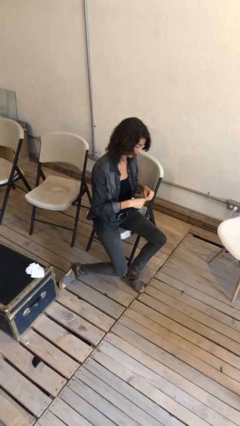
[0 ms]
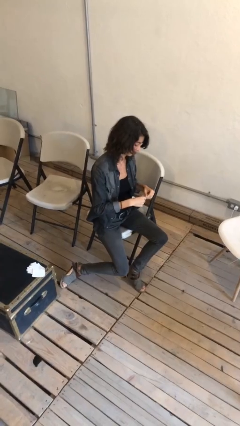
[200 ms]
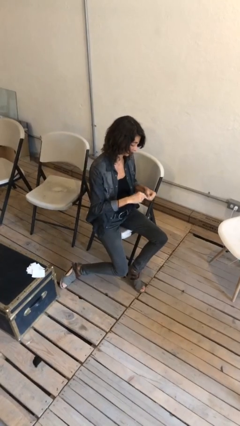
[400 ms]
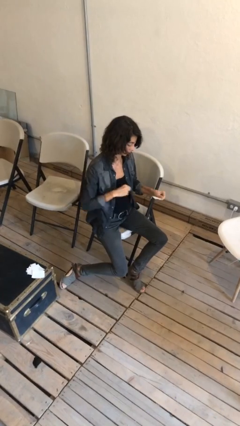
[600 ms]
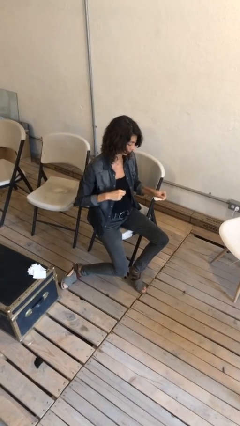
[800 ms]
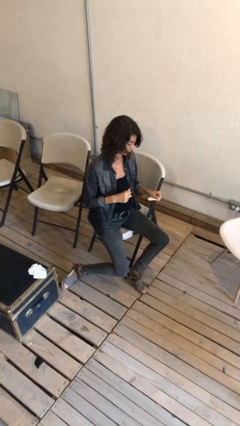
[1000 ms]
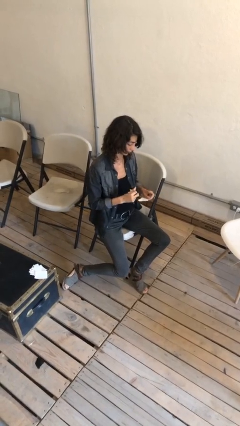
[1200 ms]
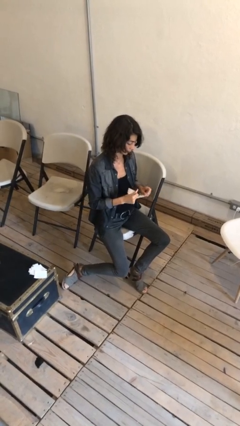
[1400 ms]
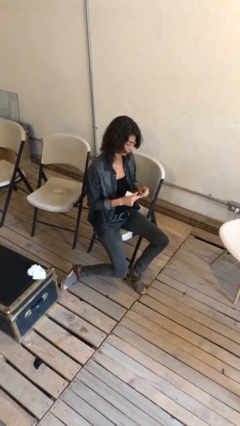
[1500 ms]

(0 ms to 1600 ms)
person tears paper

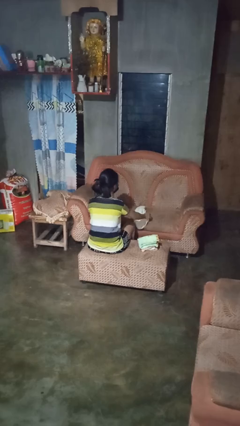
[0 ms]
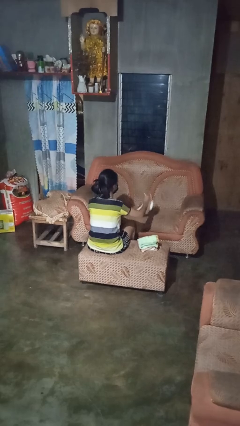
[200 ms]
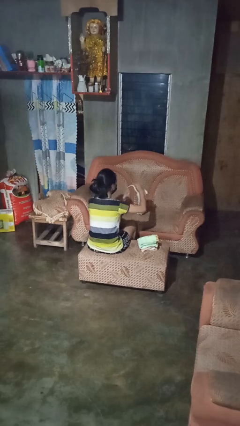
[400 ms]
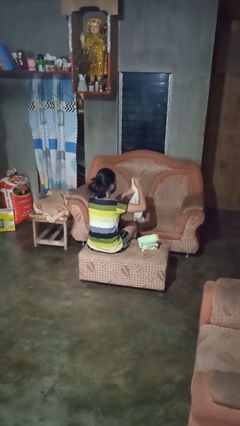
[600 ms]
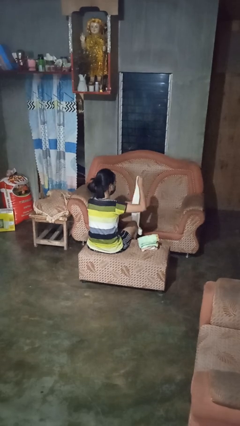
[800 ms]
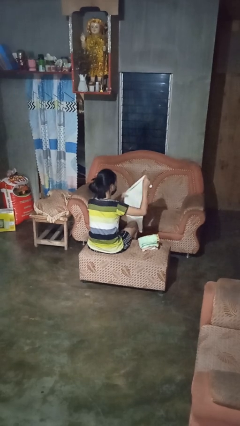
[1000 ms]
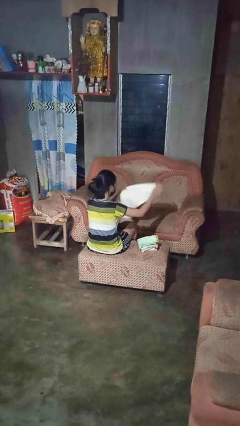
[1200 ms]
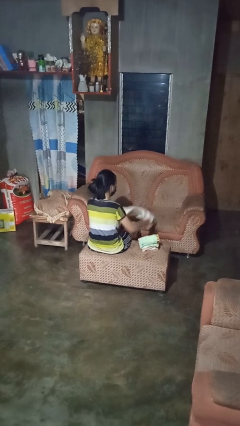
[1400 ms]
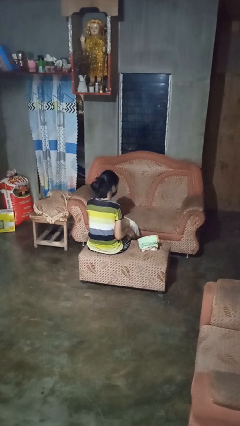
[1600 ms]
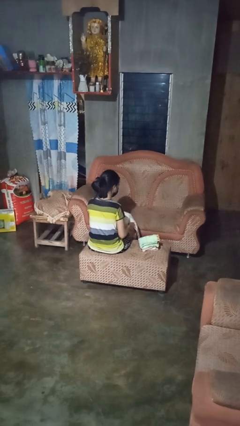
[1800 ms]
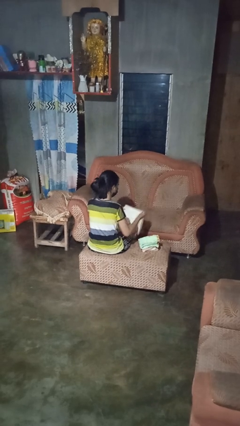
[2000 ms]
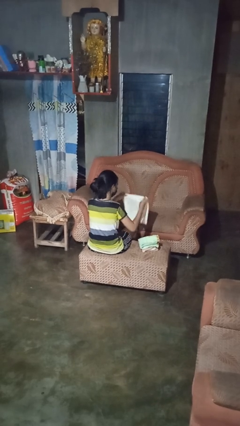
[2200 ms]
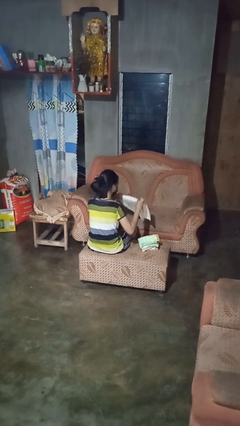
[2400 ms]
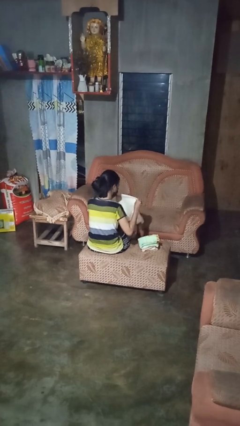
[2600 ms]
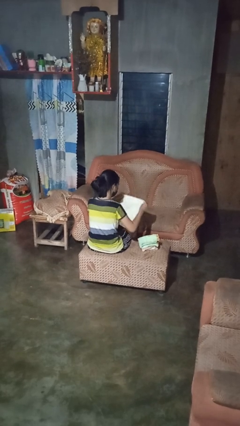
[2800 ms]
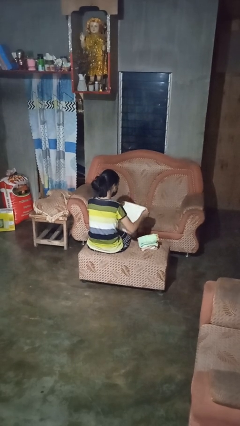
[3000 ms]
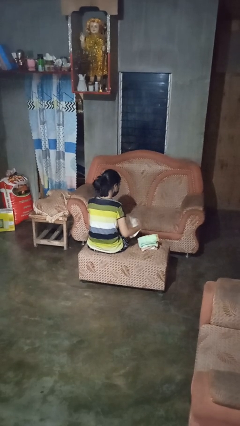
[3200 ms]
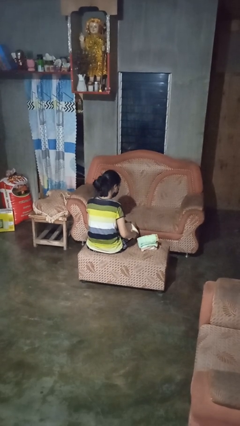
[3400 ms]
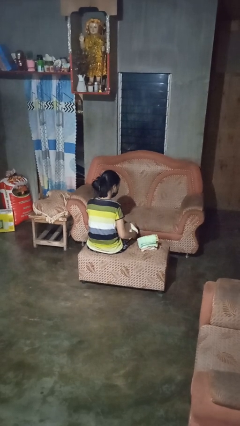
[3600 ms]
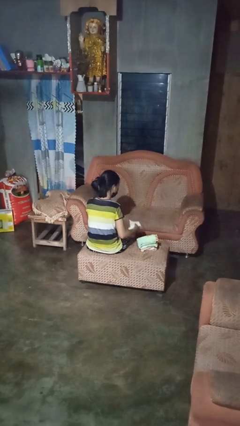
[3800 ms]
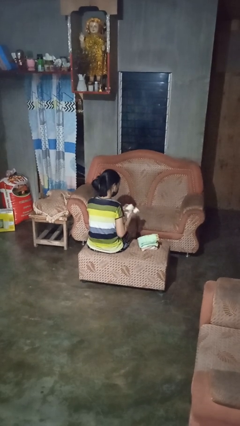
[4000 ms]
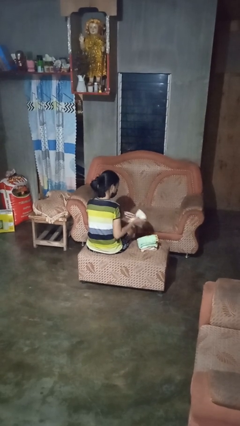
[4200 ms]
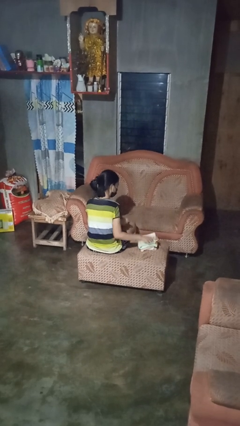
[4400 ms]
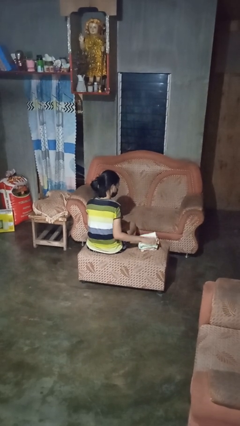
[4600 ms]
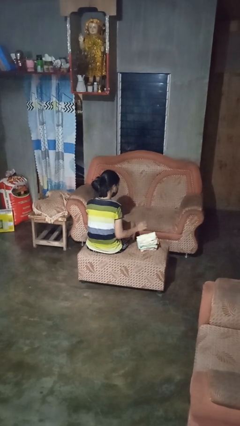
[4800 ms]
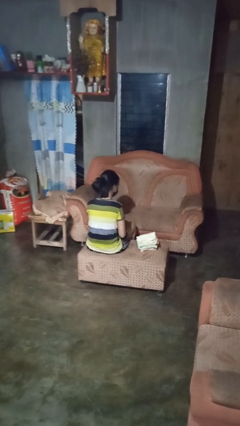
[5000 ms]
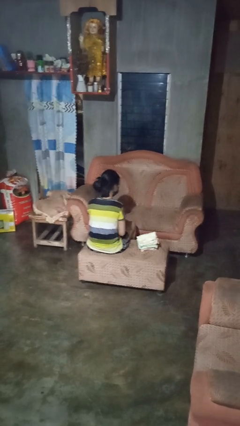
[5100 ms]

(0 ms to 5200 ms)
person folds towel

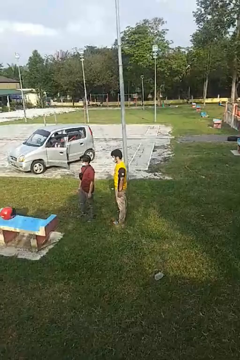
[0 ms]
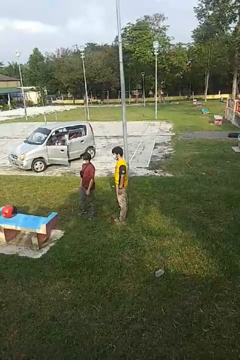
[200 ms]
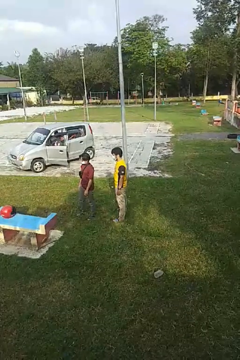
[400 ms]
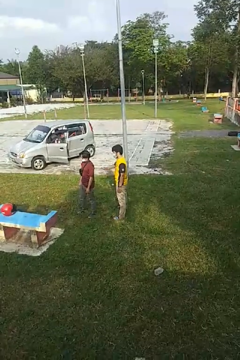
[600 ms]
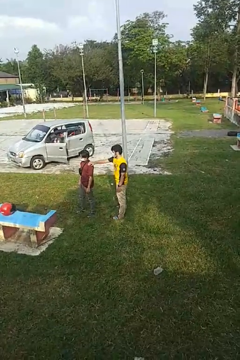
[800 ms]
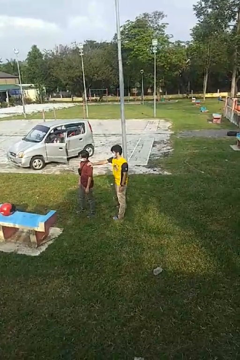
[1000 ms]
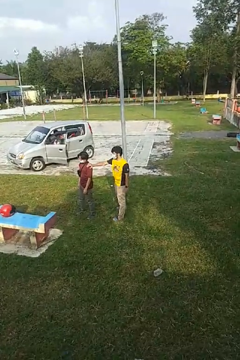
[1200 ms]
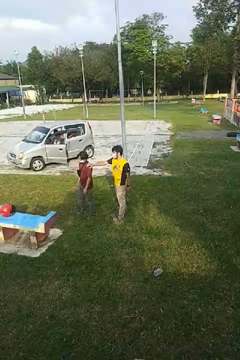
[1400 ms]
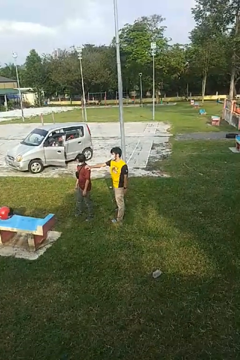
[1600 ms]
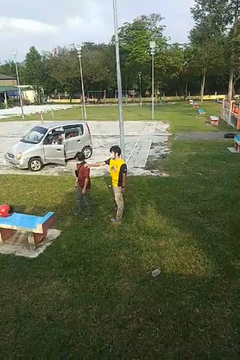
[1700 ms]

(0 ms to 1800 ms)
person grabs person by shoulder

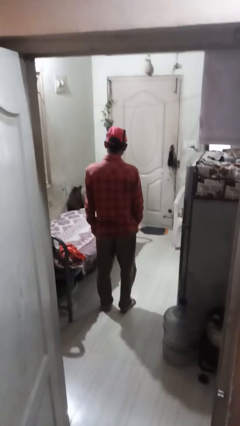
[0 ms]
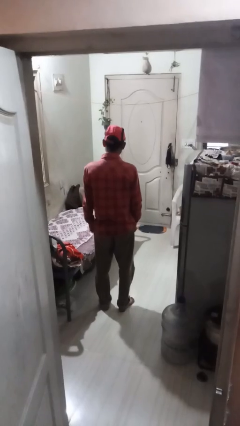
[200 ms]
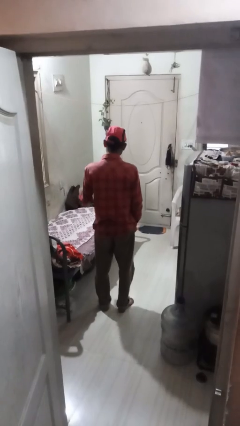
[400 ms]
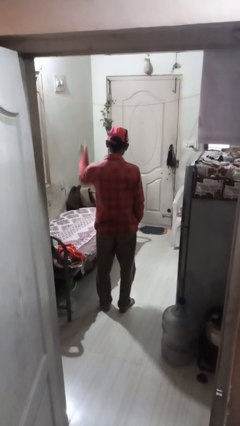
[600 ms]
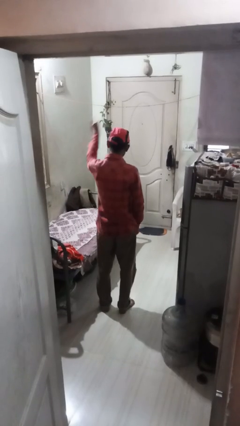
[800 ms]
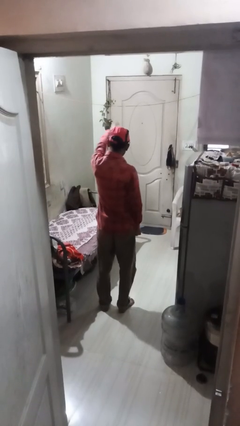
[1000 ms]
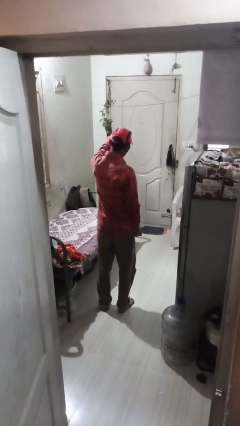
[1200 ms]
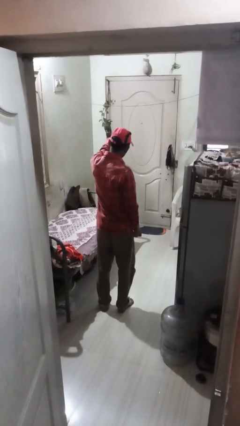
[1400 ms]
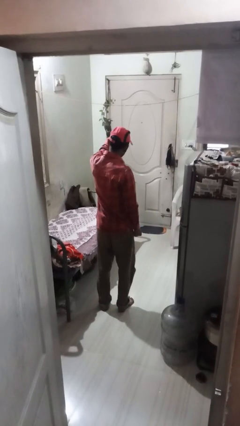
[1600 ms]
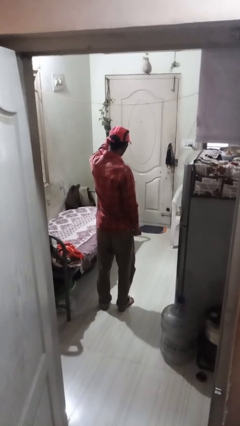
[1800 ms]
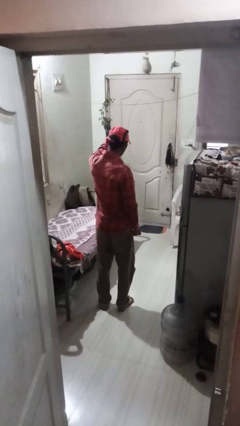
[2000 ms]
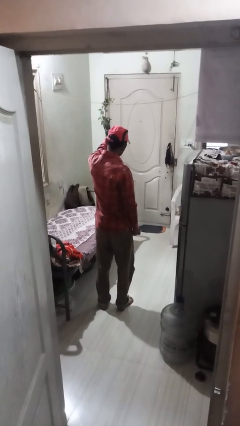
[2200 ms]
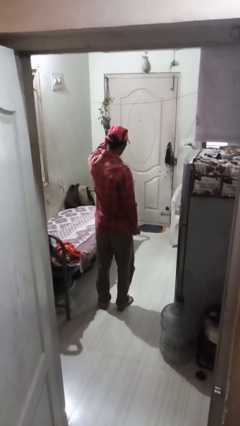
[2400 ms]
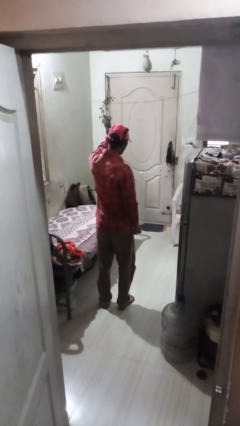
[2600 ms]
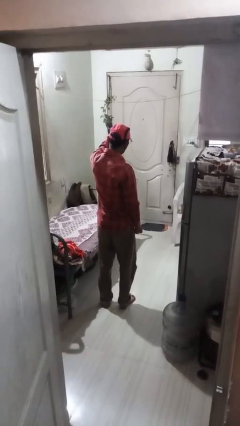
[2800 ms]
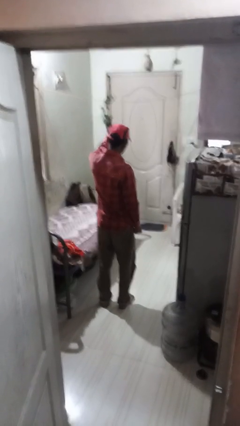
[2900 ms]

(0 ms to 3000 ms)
person points at person

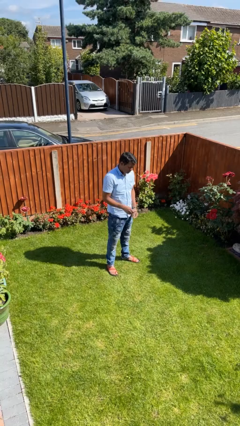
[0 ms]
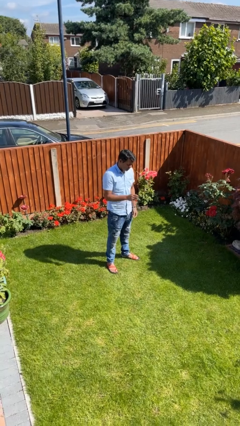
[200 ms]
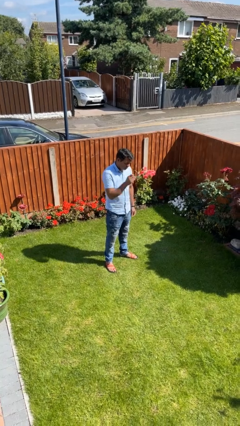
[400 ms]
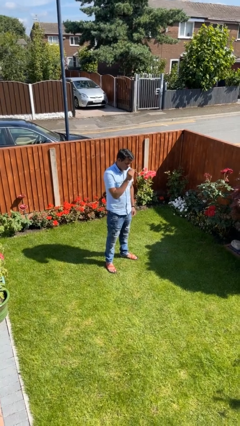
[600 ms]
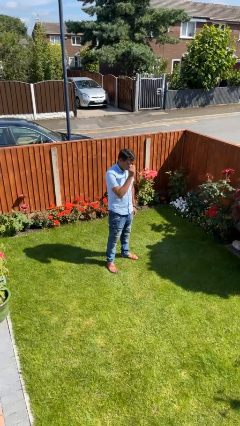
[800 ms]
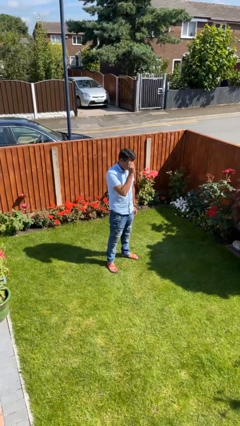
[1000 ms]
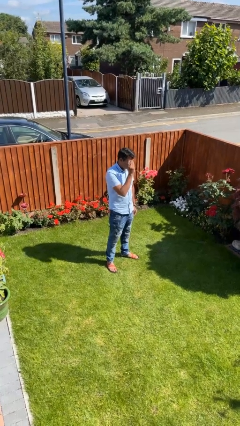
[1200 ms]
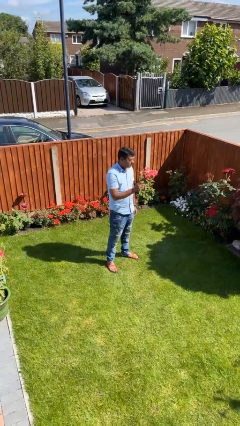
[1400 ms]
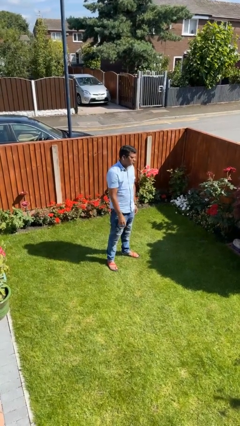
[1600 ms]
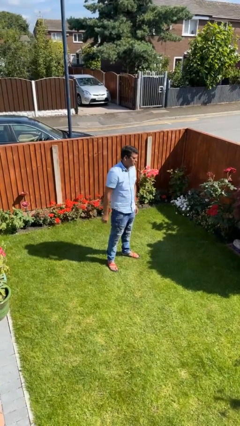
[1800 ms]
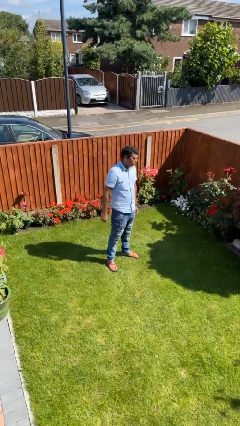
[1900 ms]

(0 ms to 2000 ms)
person puts on glasses

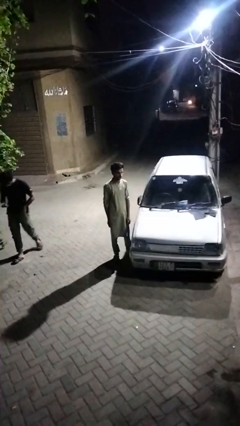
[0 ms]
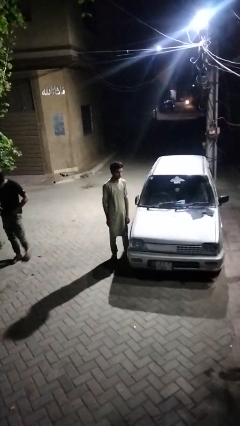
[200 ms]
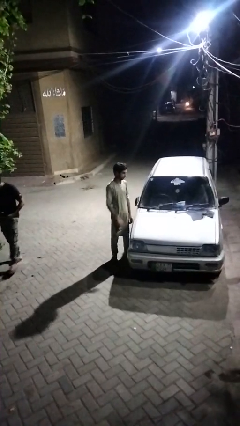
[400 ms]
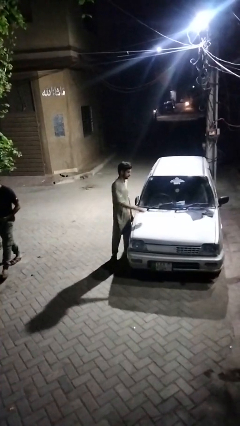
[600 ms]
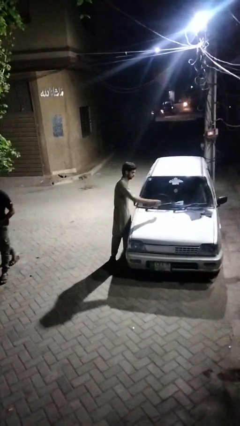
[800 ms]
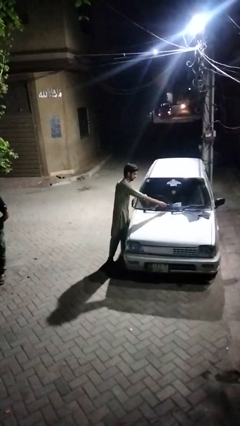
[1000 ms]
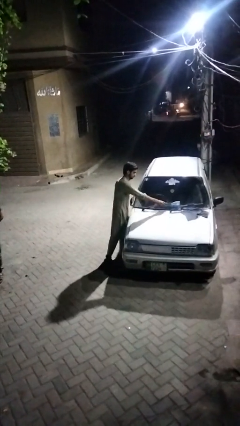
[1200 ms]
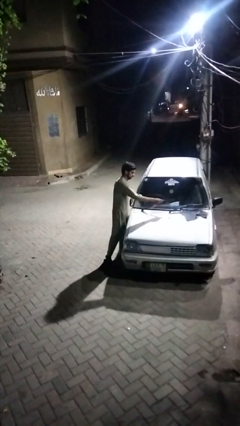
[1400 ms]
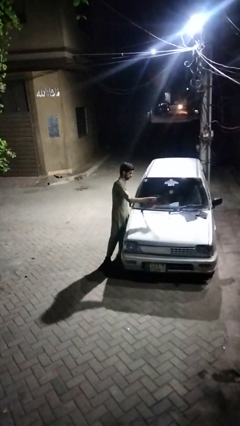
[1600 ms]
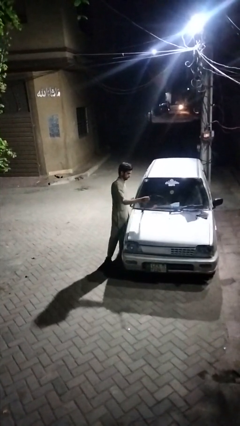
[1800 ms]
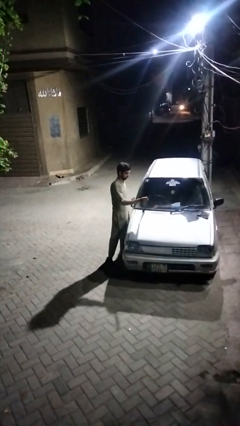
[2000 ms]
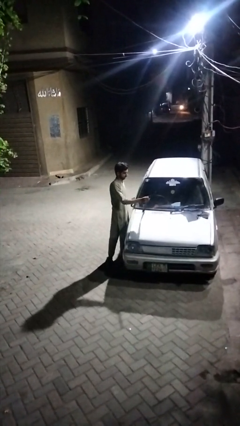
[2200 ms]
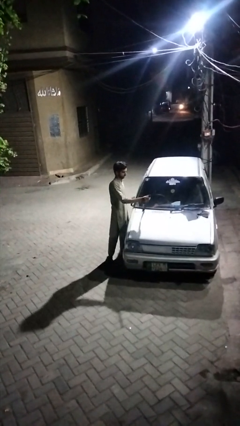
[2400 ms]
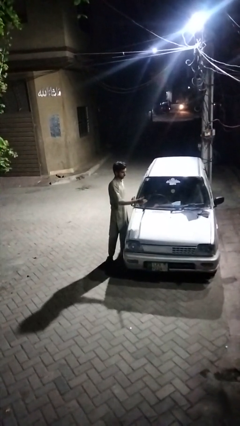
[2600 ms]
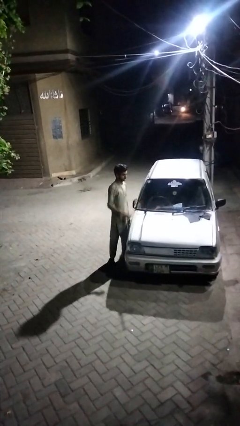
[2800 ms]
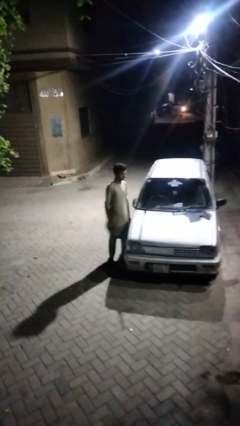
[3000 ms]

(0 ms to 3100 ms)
person flips up car wipers

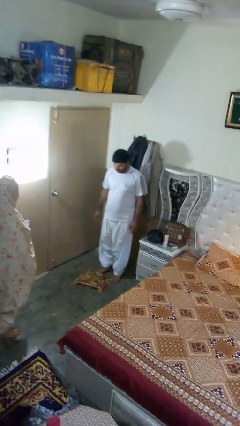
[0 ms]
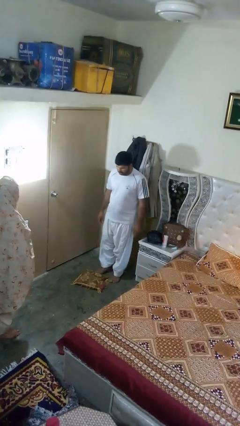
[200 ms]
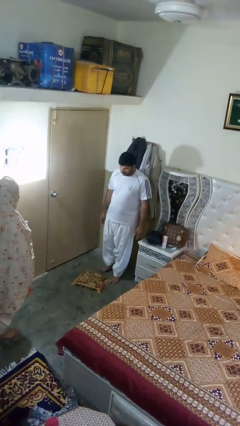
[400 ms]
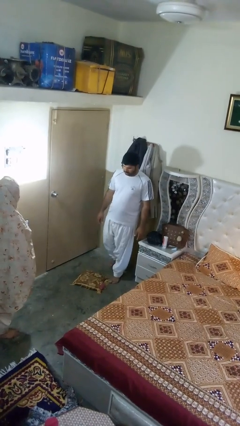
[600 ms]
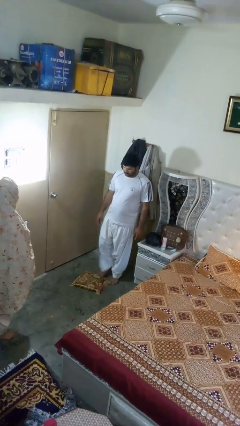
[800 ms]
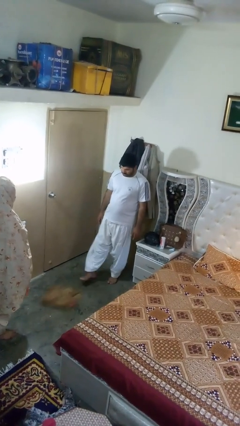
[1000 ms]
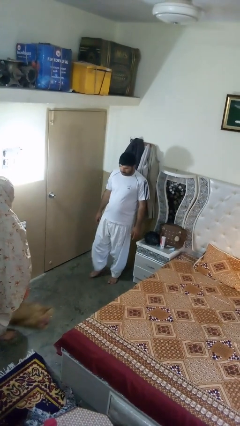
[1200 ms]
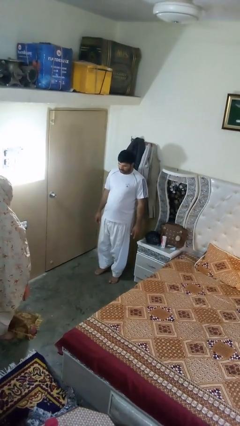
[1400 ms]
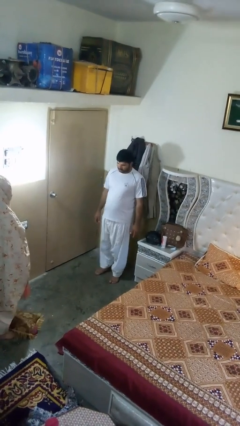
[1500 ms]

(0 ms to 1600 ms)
person kicks object to person
